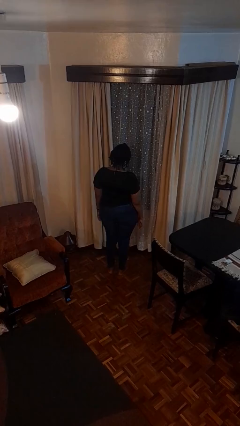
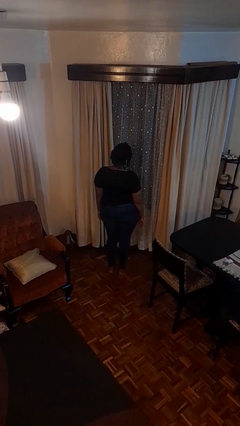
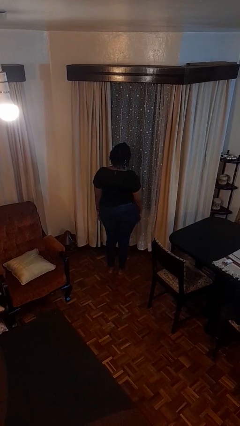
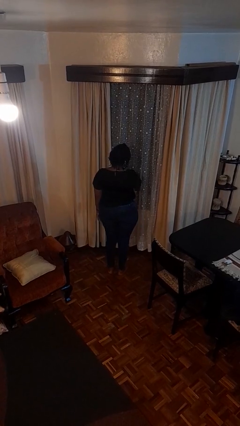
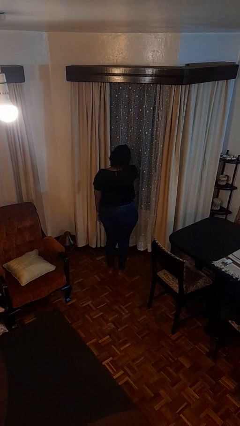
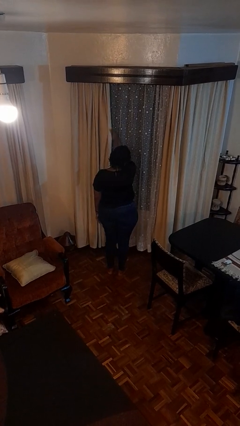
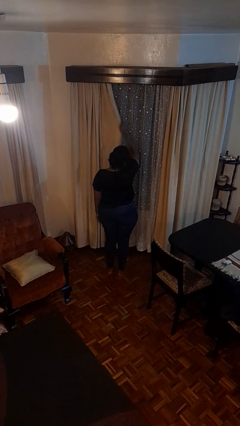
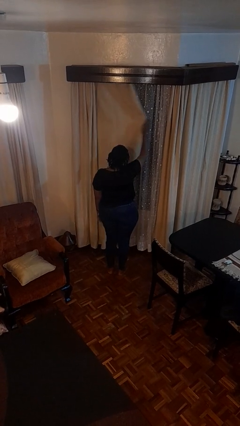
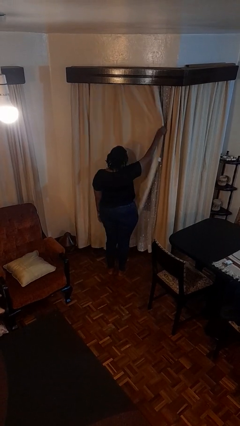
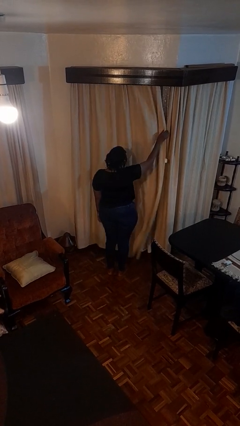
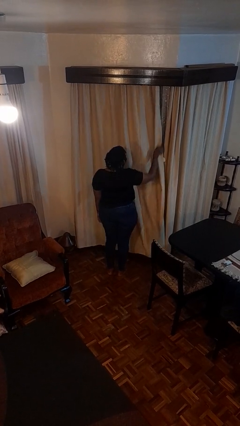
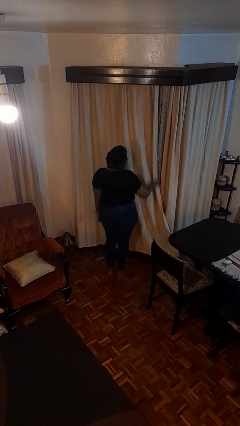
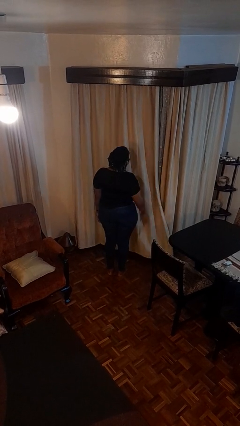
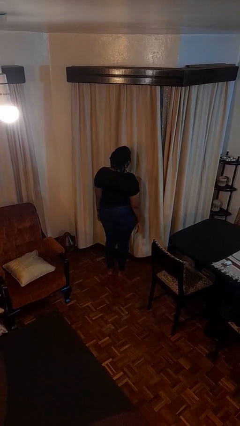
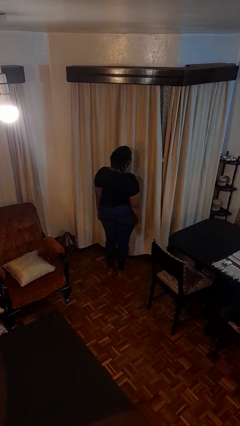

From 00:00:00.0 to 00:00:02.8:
person closes curtains

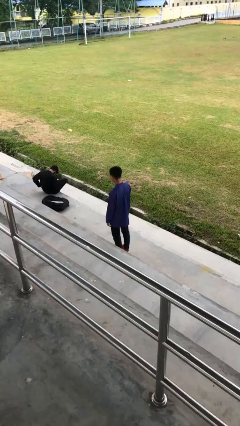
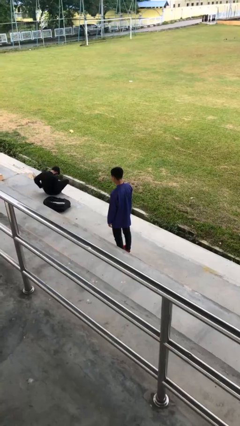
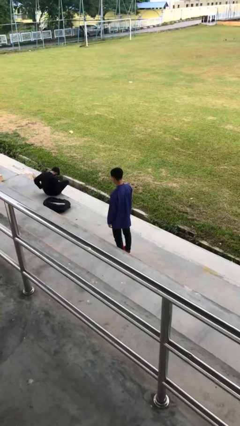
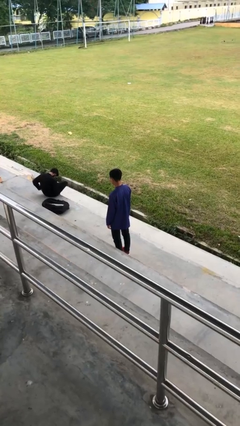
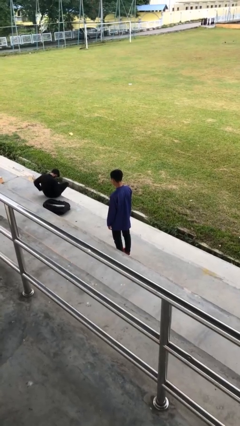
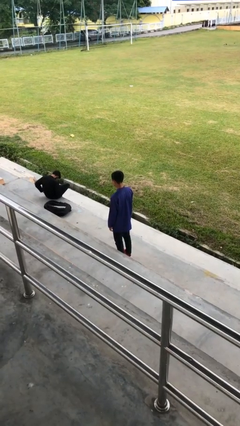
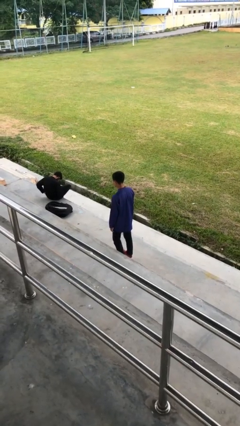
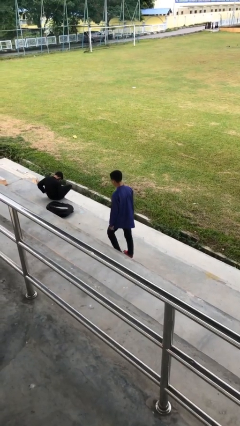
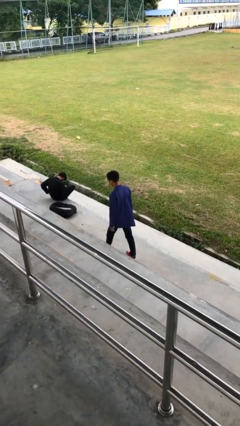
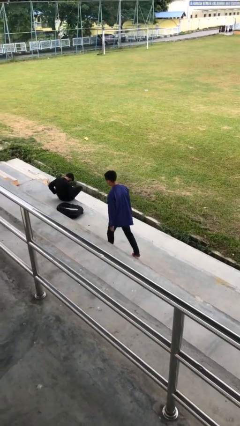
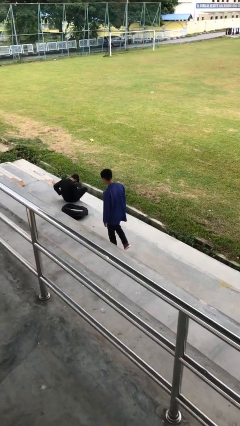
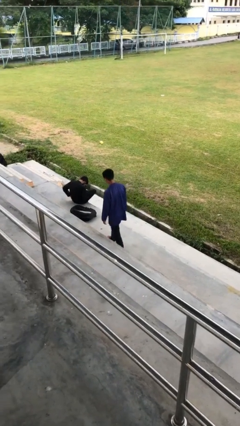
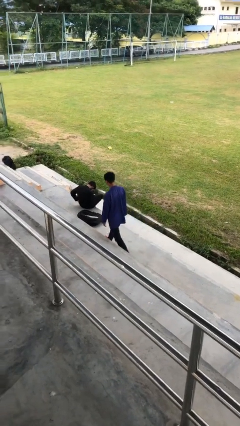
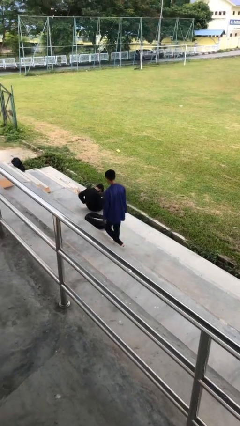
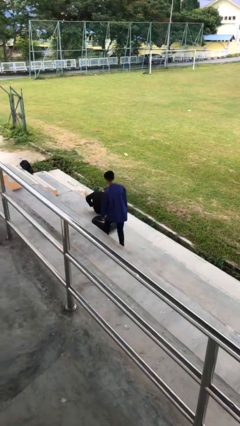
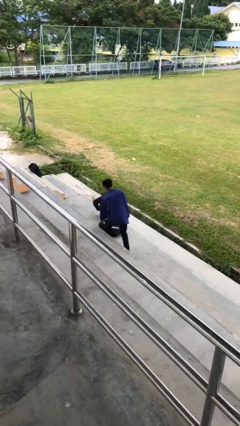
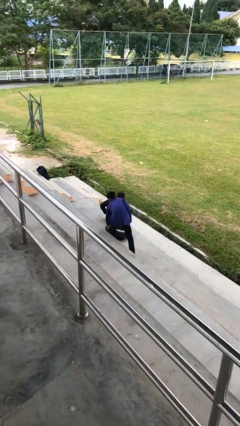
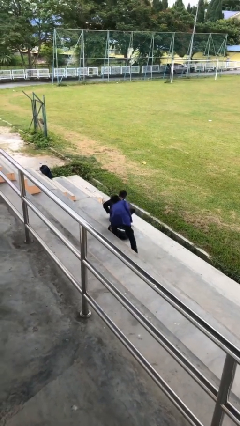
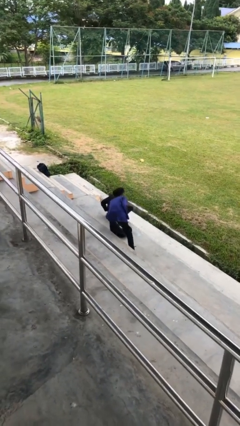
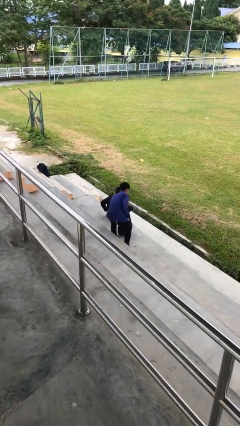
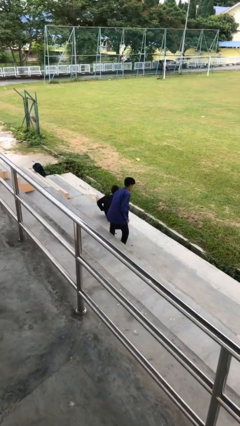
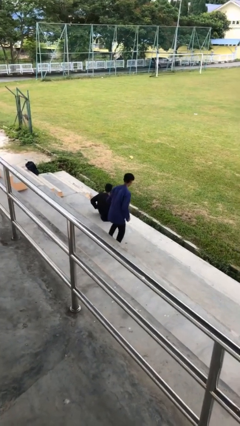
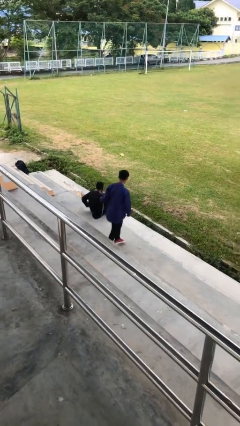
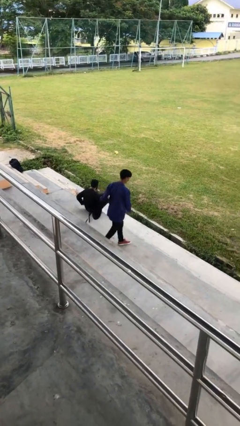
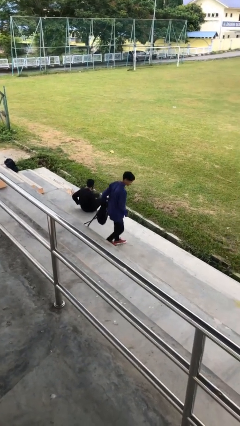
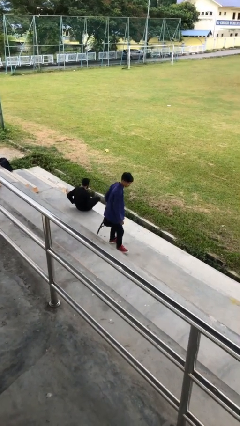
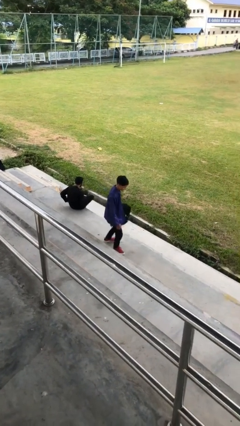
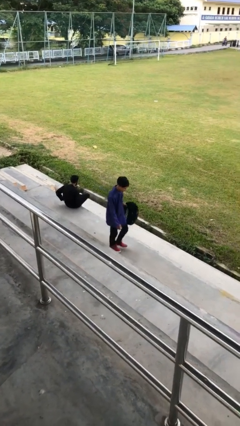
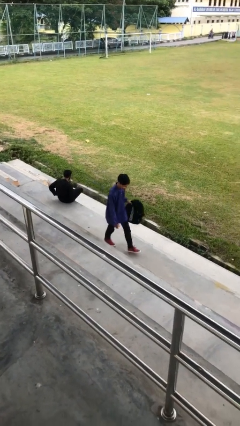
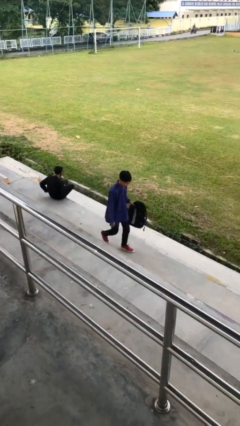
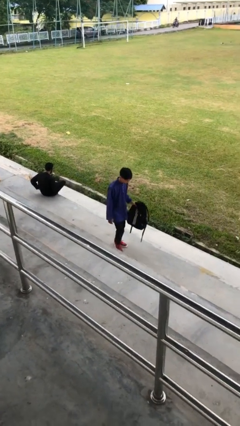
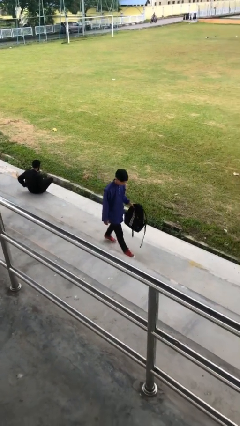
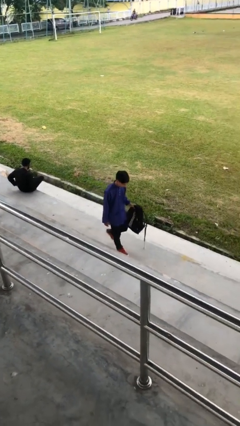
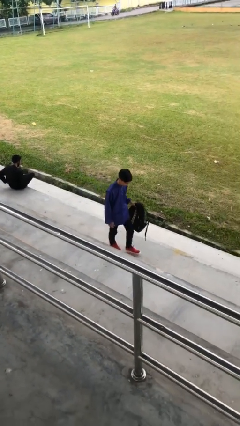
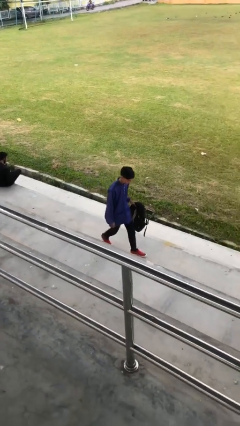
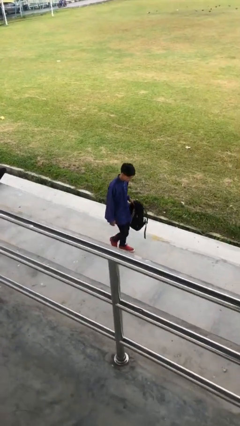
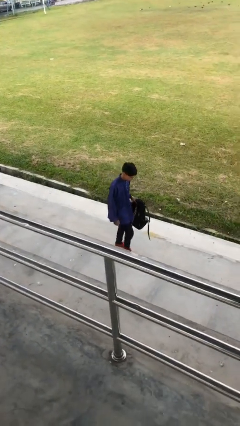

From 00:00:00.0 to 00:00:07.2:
person steals object from person

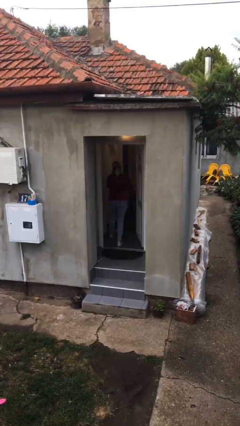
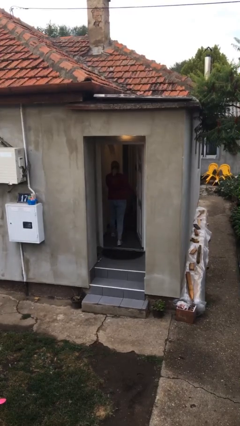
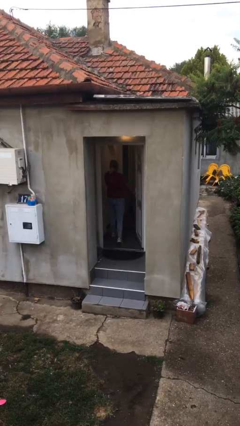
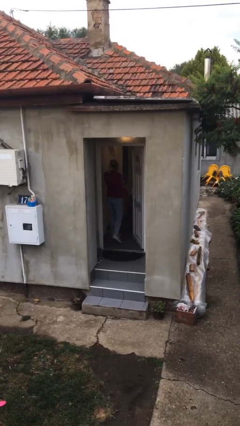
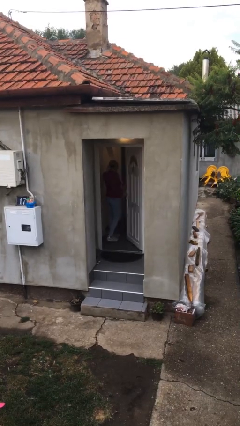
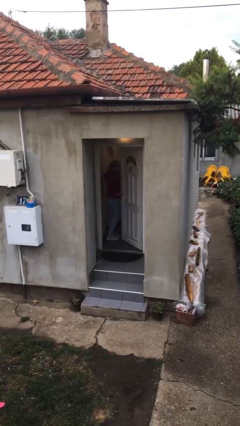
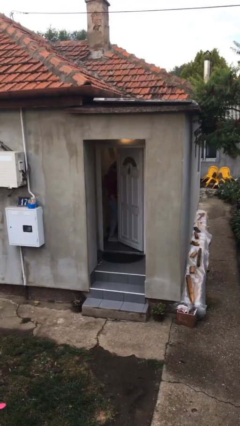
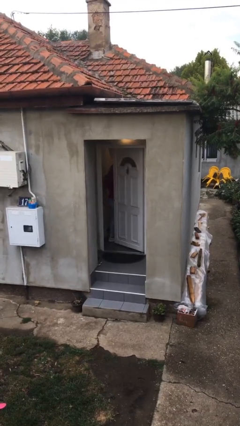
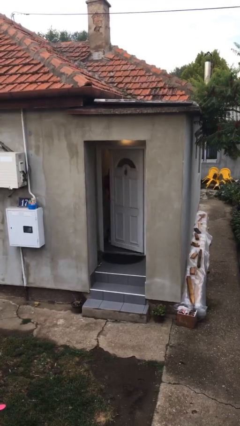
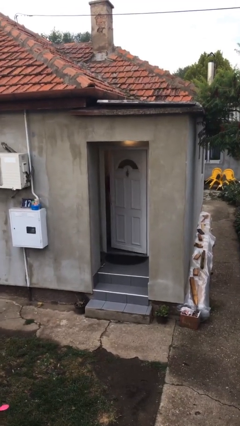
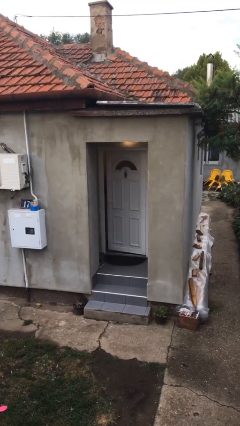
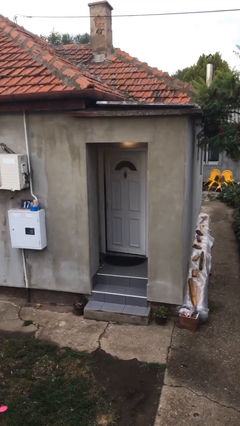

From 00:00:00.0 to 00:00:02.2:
person exits scene through structure

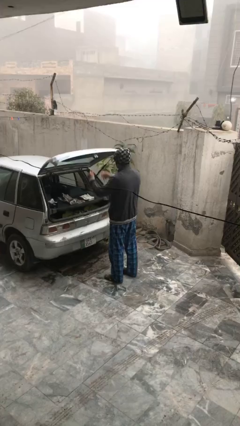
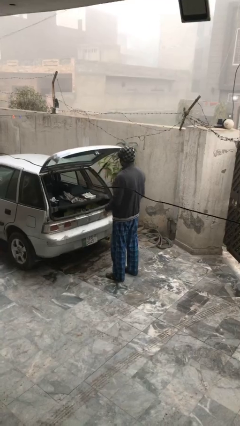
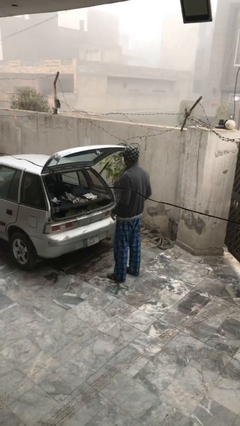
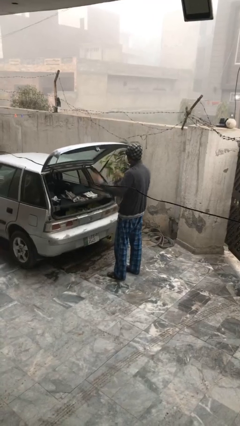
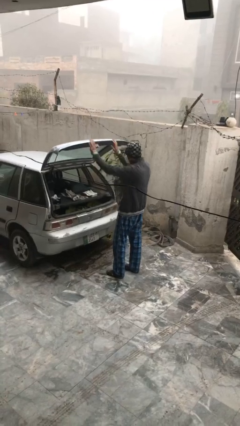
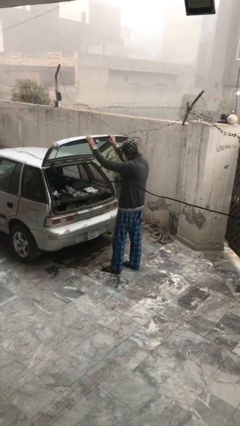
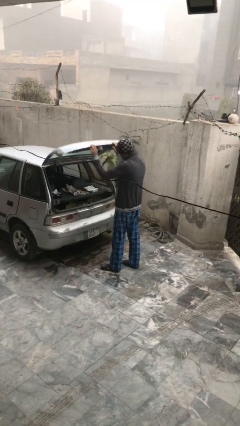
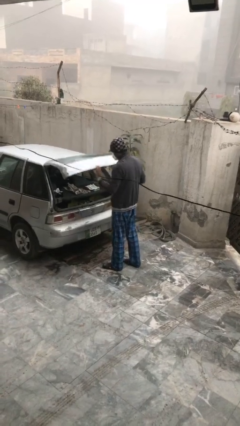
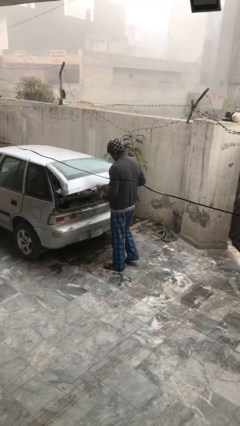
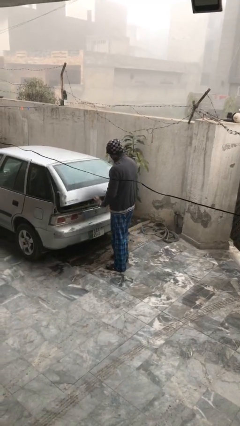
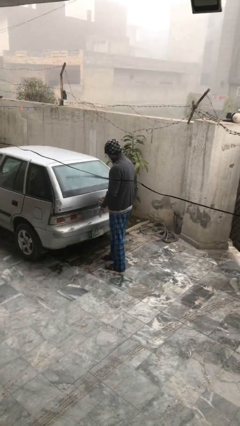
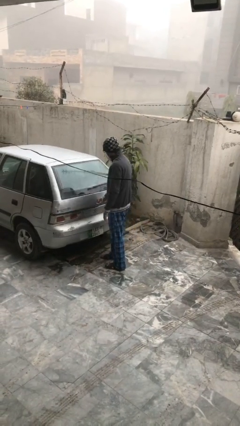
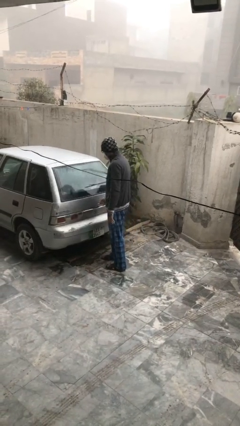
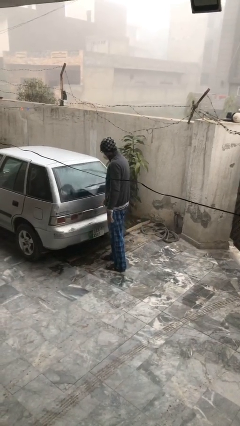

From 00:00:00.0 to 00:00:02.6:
person closes car trunk

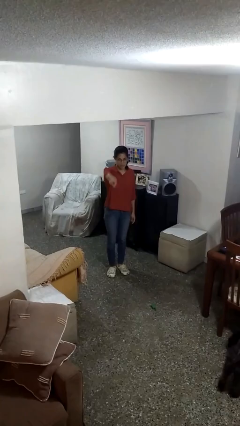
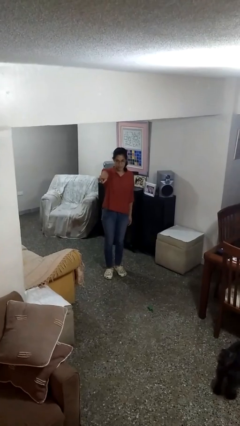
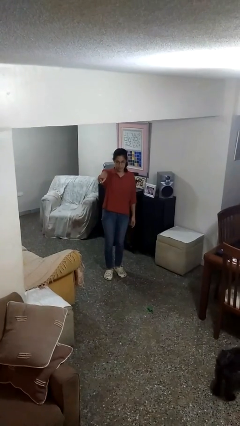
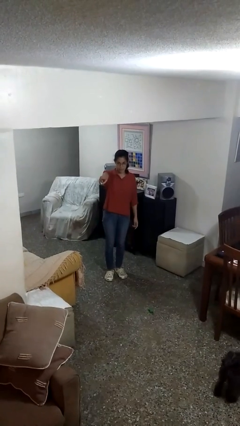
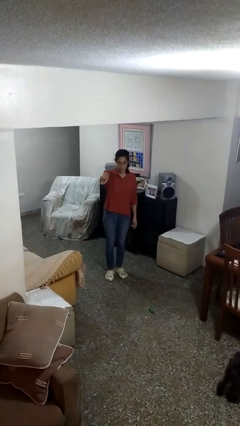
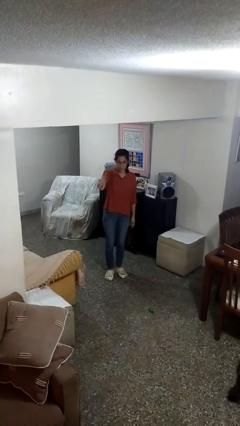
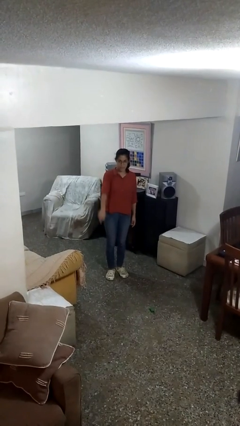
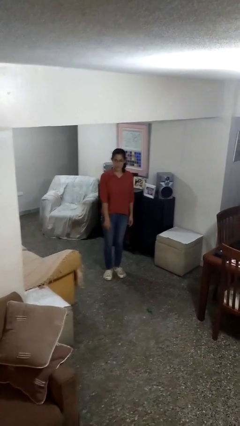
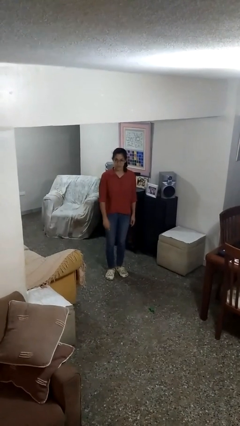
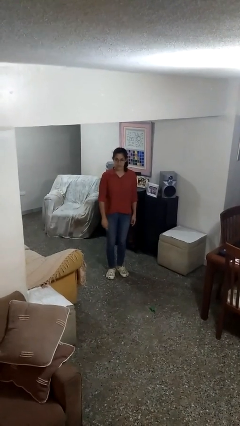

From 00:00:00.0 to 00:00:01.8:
person points at person

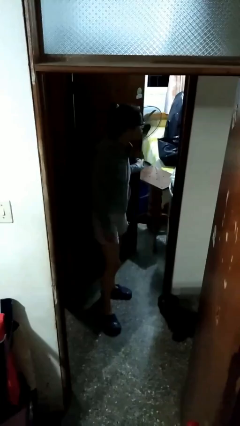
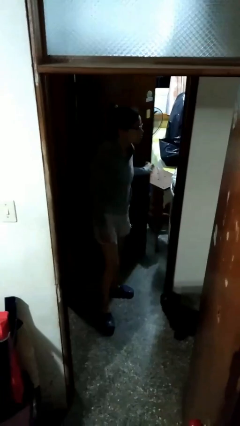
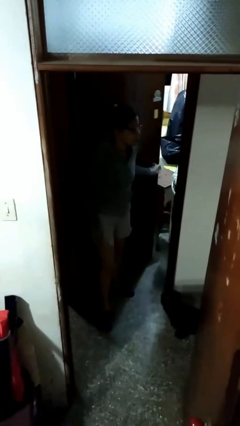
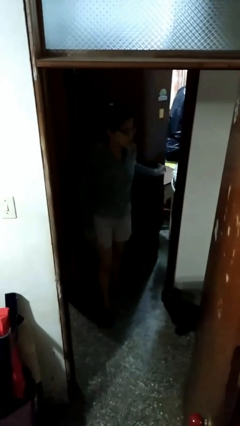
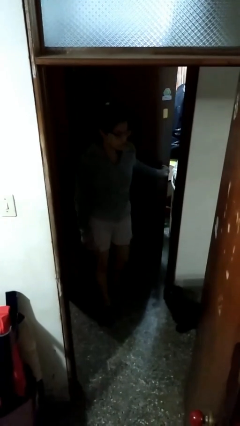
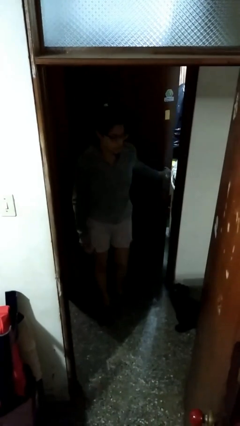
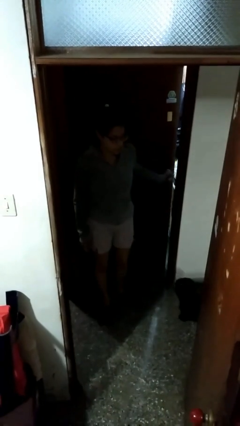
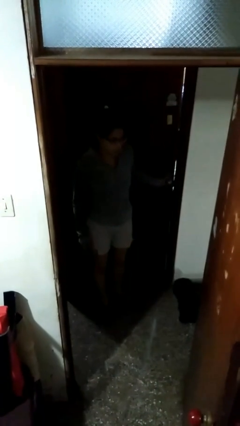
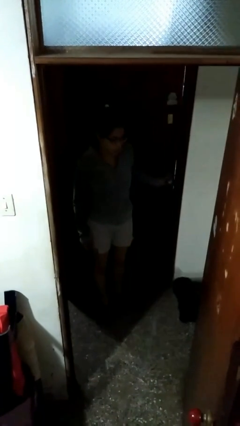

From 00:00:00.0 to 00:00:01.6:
person closes facility door
